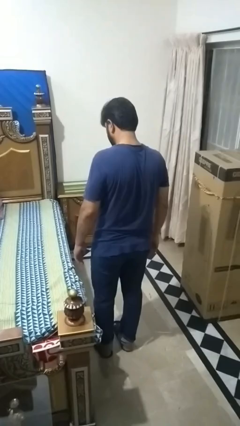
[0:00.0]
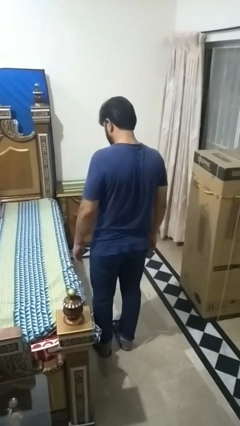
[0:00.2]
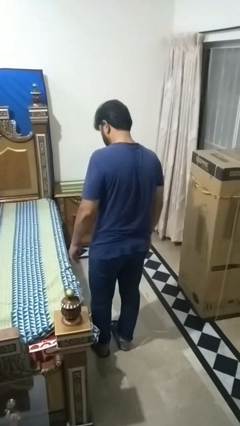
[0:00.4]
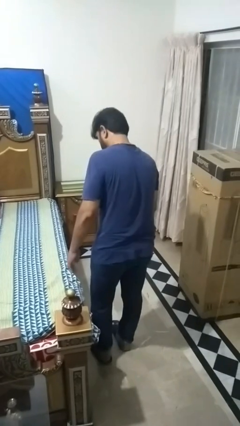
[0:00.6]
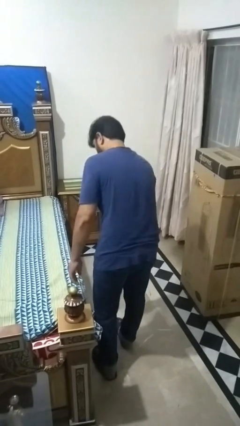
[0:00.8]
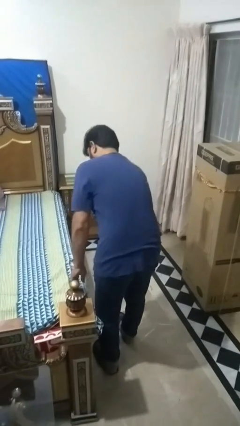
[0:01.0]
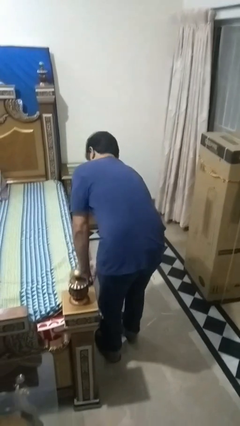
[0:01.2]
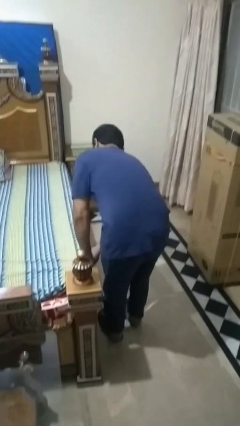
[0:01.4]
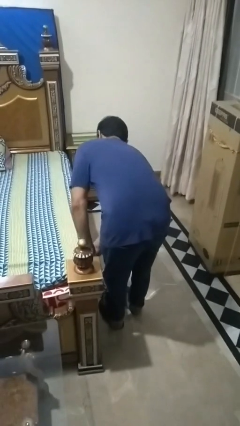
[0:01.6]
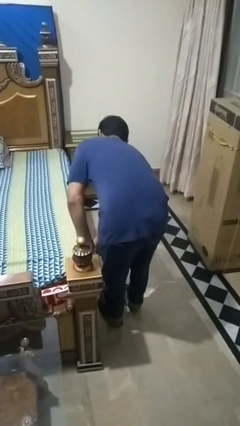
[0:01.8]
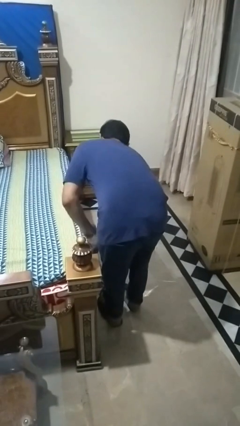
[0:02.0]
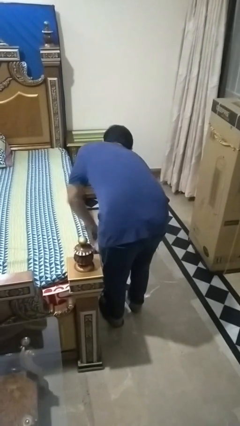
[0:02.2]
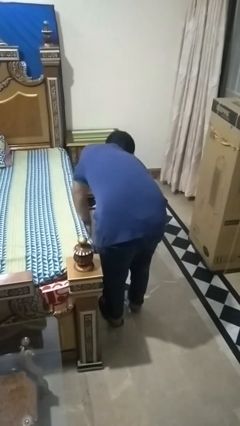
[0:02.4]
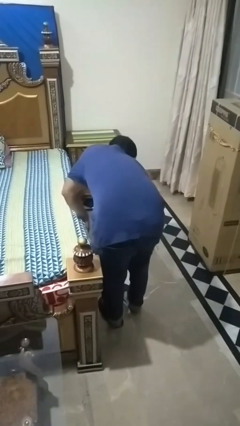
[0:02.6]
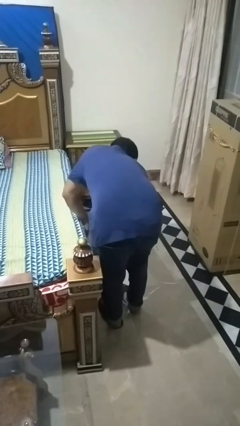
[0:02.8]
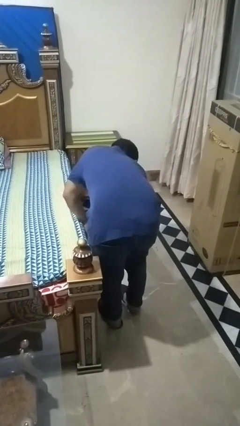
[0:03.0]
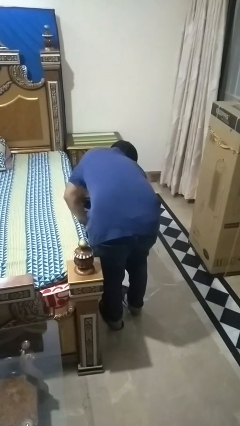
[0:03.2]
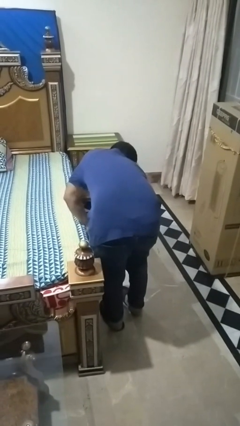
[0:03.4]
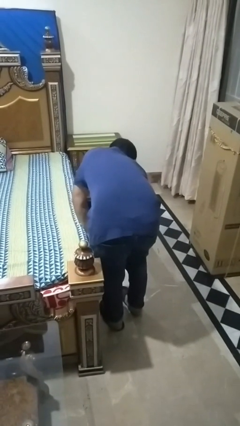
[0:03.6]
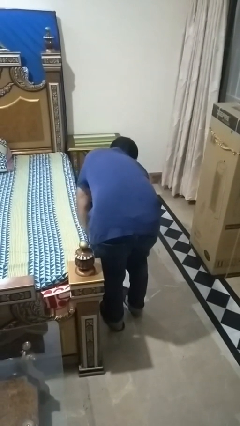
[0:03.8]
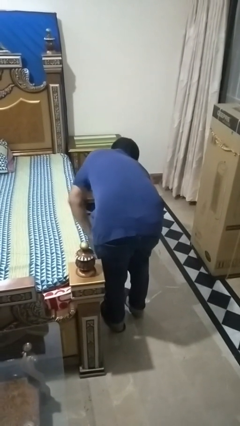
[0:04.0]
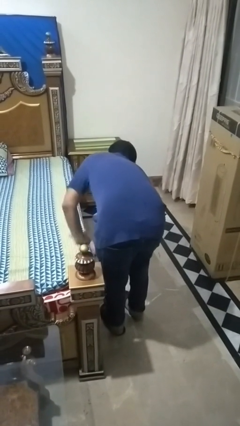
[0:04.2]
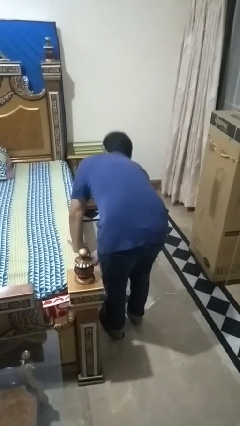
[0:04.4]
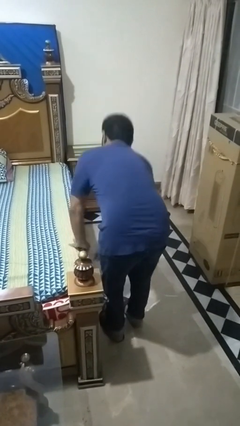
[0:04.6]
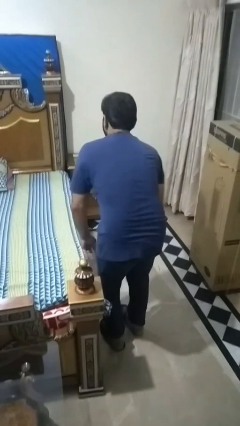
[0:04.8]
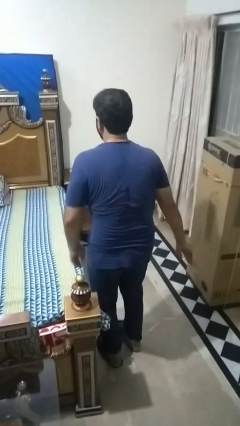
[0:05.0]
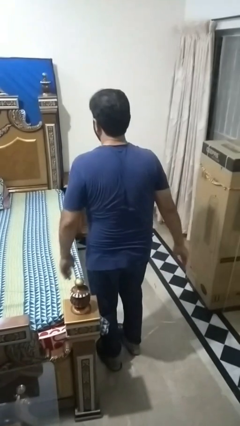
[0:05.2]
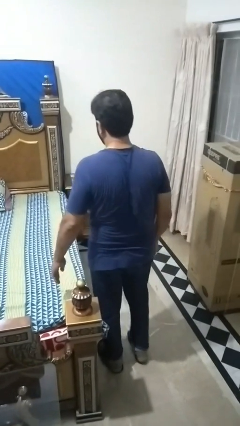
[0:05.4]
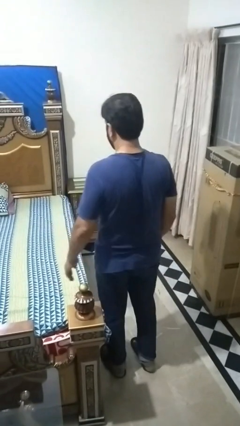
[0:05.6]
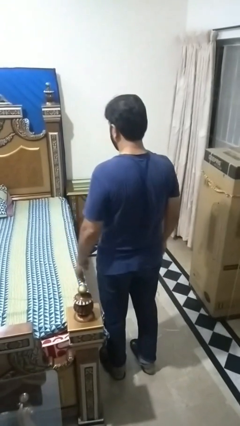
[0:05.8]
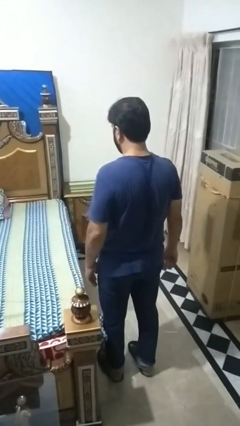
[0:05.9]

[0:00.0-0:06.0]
person makes bed

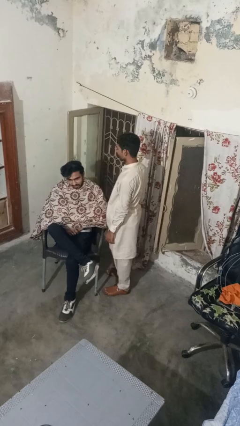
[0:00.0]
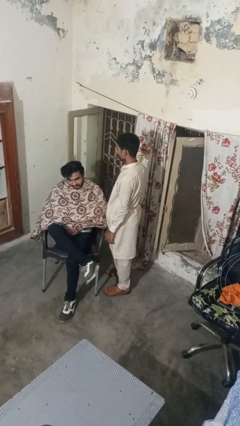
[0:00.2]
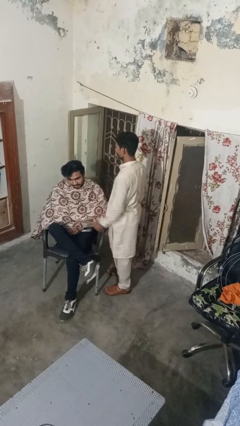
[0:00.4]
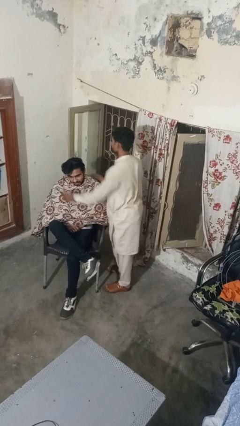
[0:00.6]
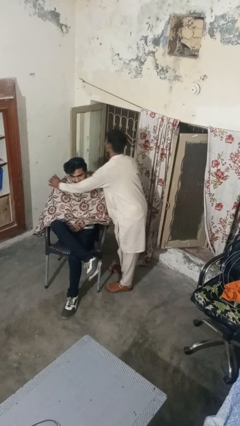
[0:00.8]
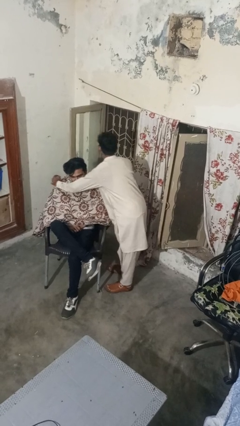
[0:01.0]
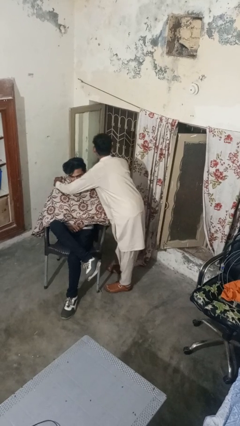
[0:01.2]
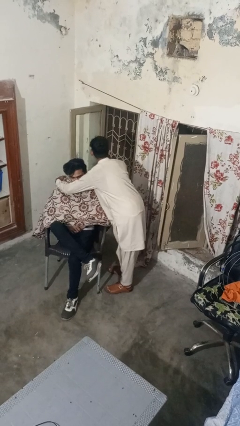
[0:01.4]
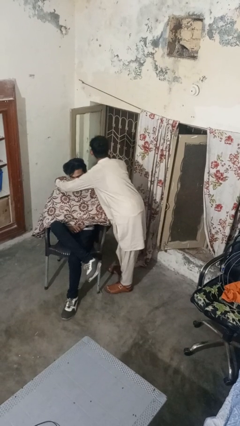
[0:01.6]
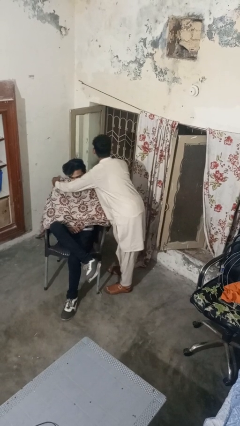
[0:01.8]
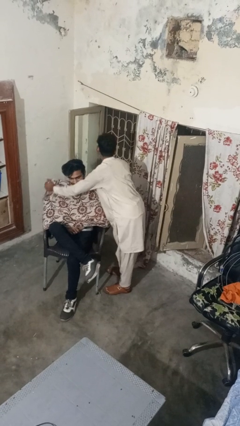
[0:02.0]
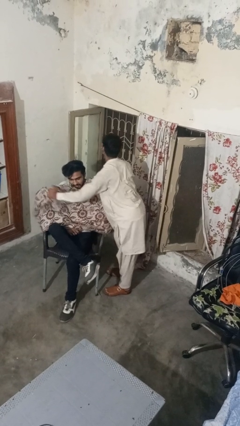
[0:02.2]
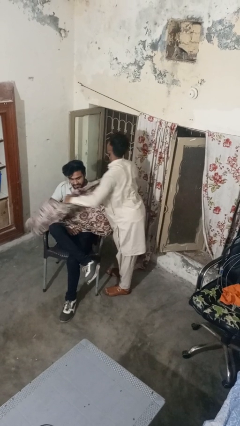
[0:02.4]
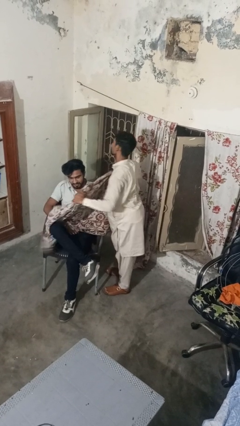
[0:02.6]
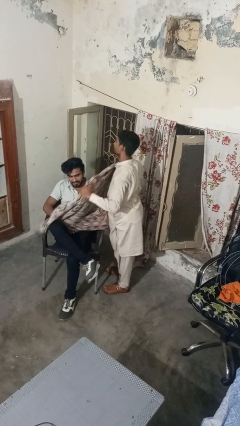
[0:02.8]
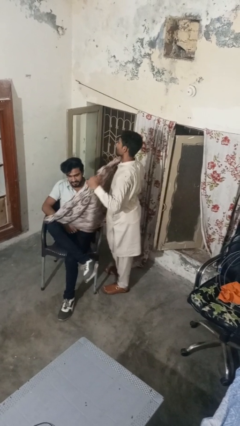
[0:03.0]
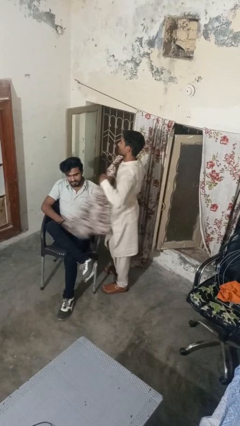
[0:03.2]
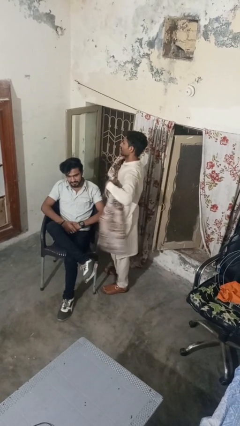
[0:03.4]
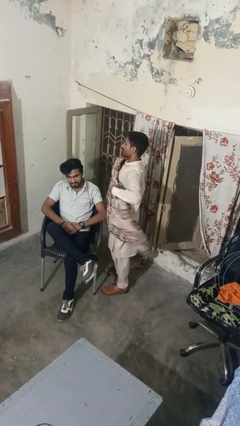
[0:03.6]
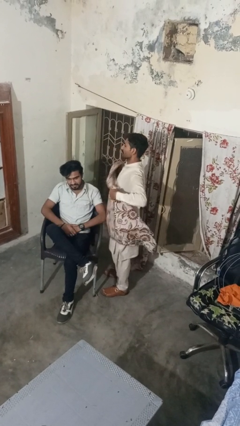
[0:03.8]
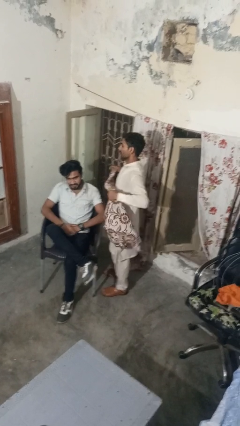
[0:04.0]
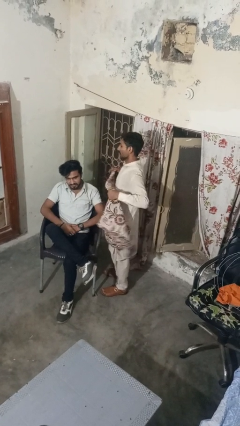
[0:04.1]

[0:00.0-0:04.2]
person uncovers friend with blanket

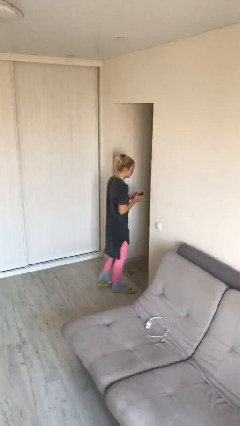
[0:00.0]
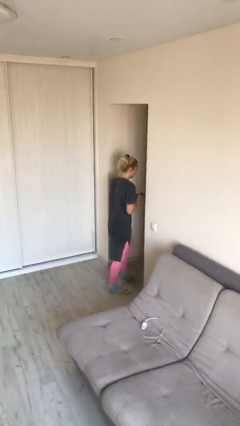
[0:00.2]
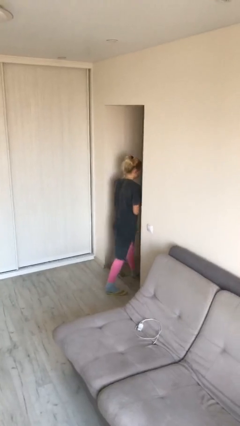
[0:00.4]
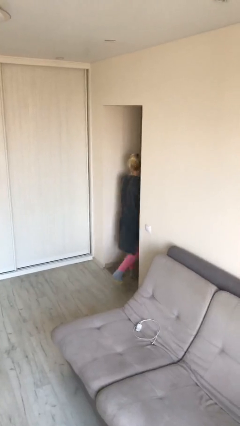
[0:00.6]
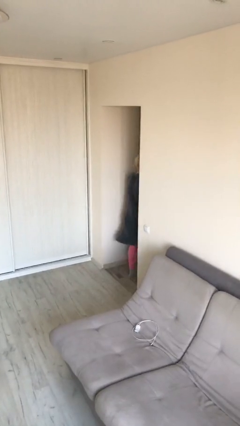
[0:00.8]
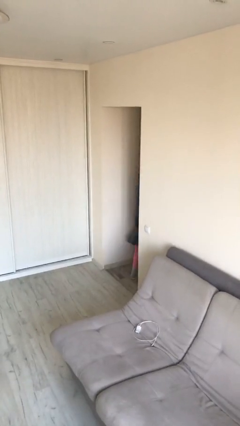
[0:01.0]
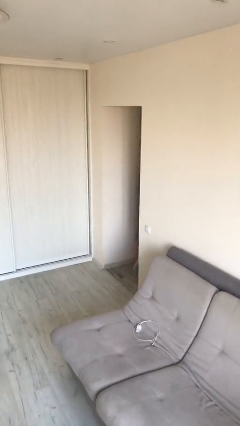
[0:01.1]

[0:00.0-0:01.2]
person exits scene through structure

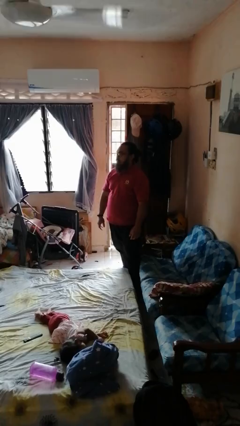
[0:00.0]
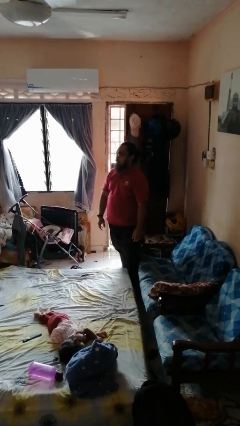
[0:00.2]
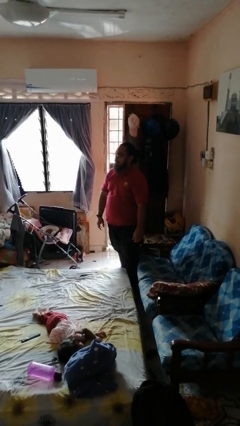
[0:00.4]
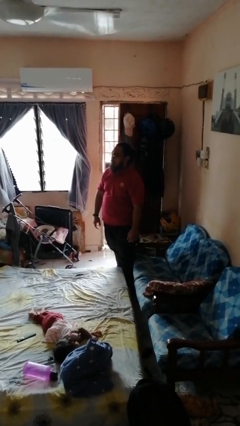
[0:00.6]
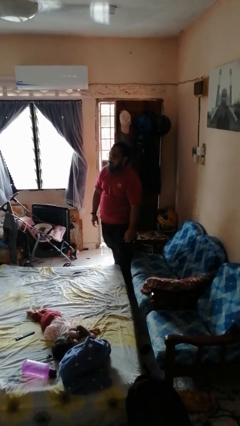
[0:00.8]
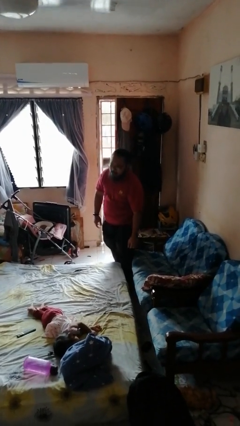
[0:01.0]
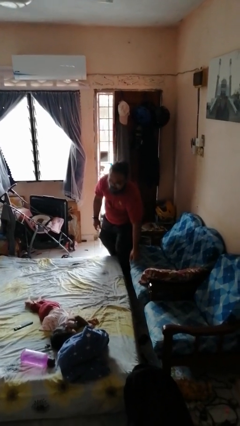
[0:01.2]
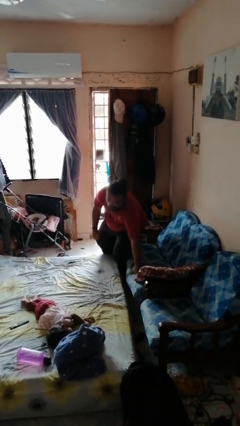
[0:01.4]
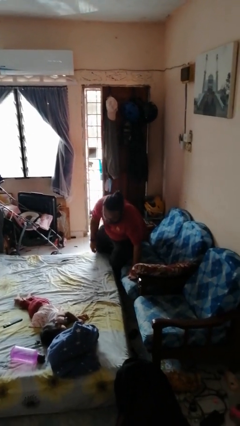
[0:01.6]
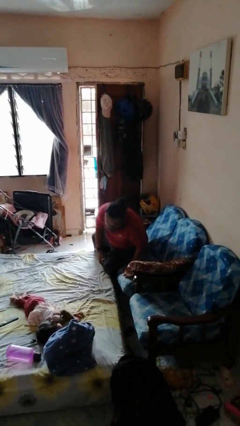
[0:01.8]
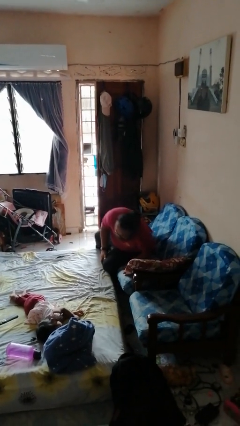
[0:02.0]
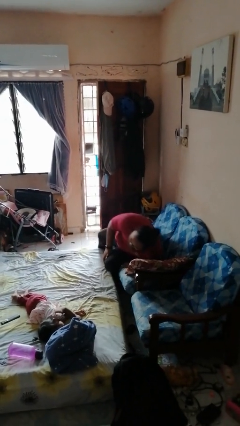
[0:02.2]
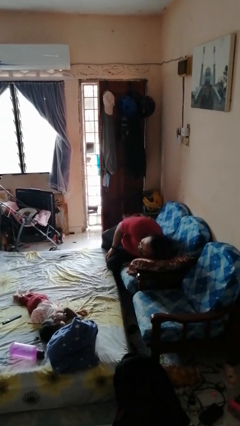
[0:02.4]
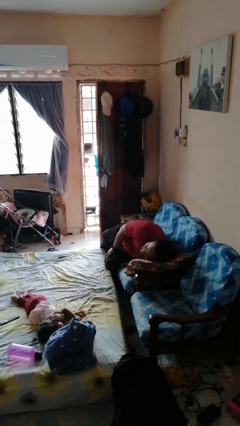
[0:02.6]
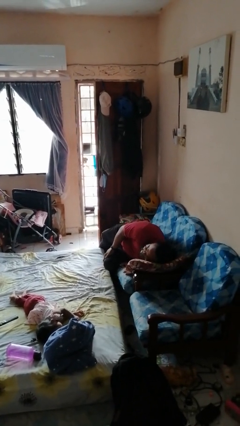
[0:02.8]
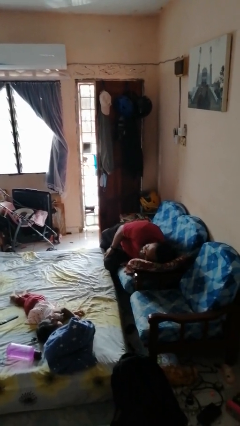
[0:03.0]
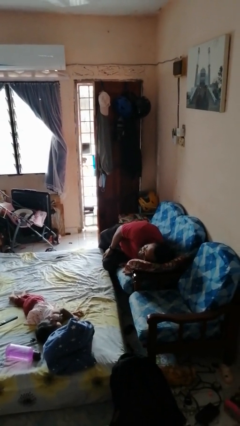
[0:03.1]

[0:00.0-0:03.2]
person lies down on bed

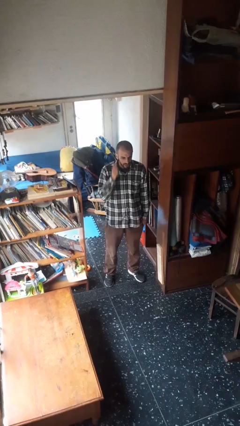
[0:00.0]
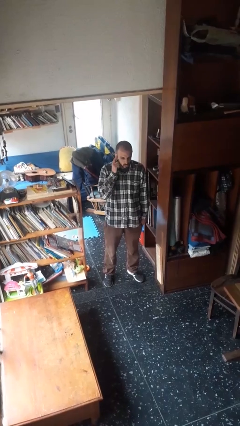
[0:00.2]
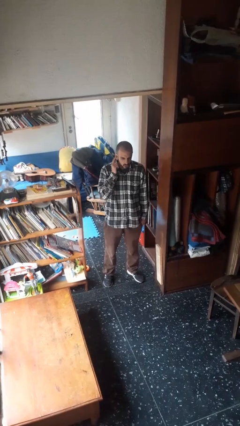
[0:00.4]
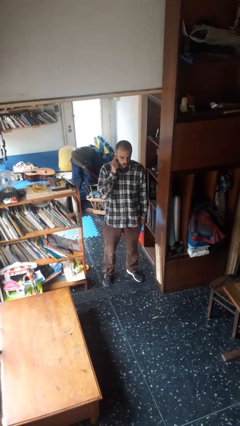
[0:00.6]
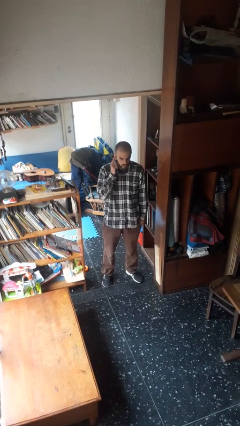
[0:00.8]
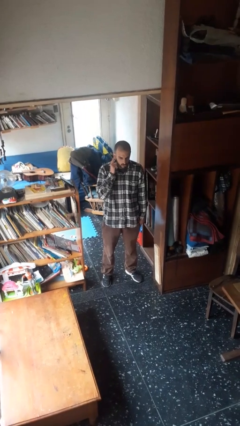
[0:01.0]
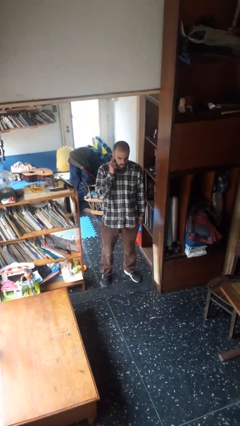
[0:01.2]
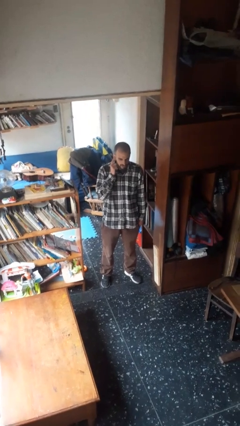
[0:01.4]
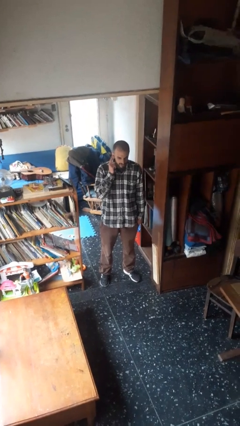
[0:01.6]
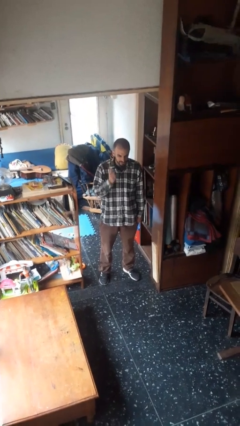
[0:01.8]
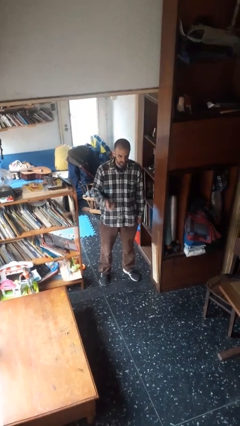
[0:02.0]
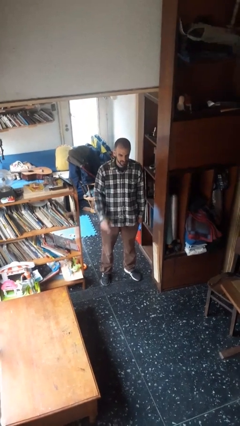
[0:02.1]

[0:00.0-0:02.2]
person gestures listen closely

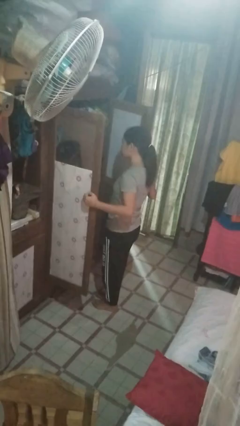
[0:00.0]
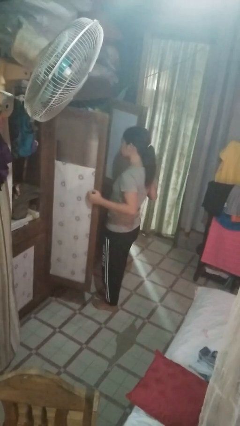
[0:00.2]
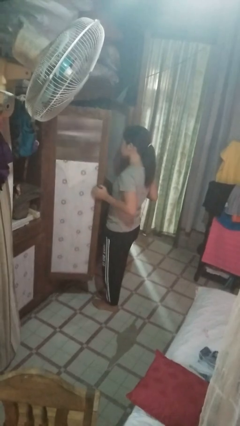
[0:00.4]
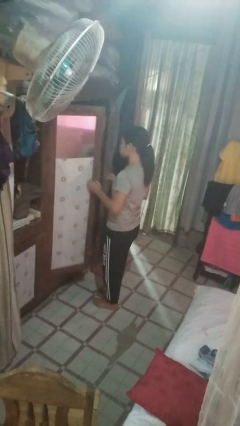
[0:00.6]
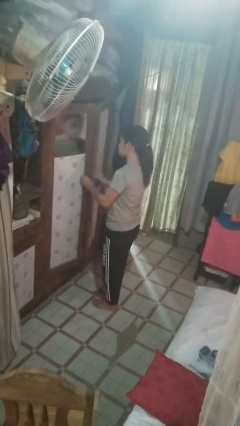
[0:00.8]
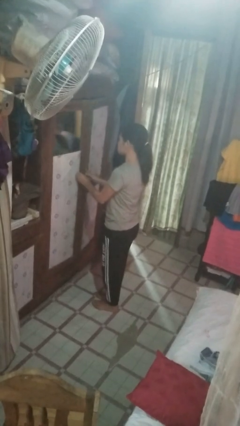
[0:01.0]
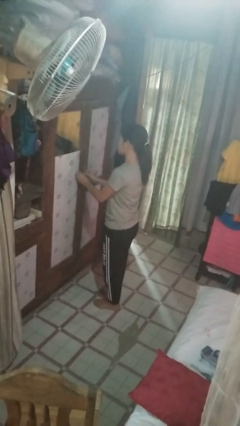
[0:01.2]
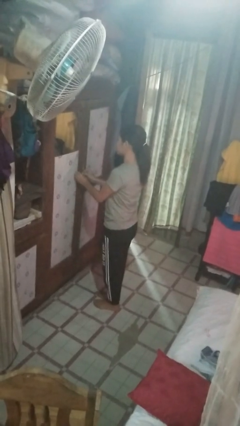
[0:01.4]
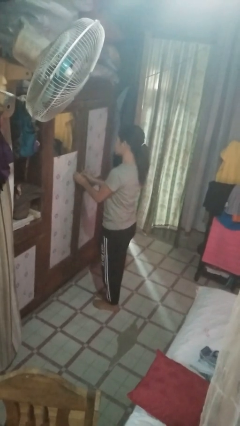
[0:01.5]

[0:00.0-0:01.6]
person closes closet door
